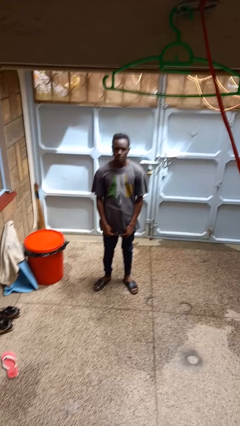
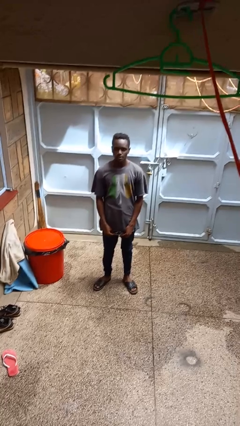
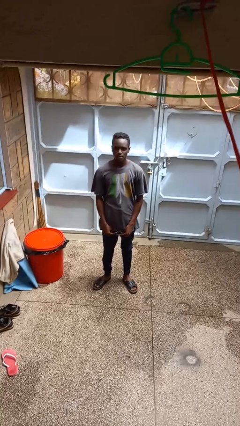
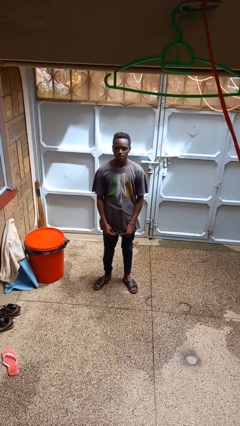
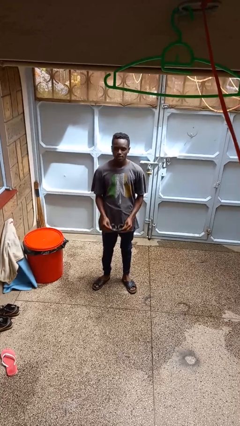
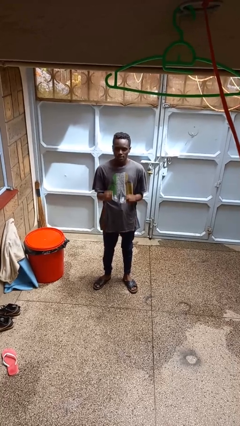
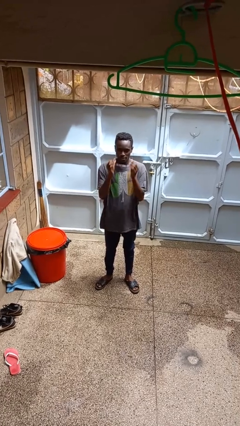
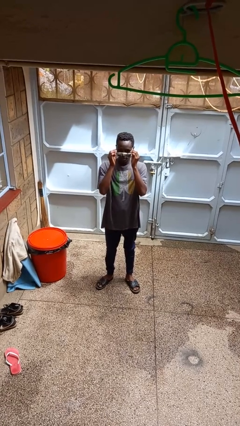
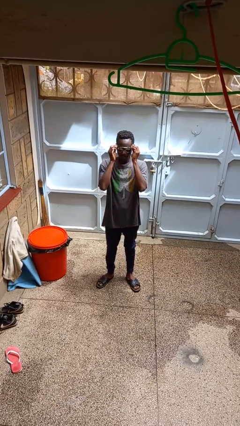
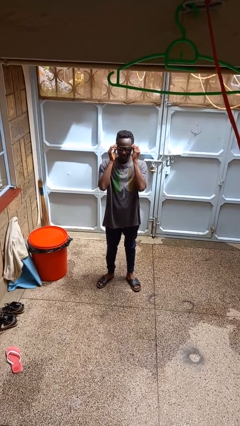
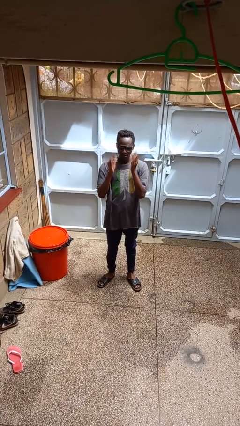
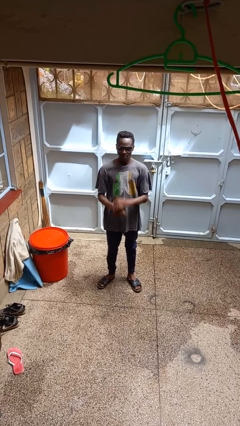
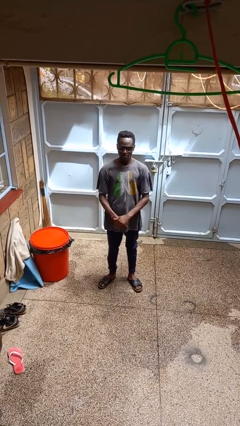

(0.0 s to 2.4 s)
person puts on sunglasses

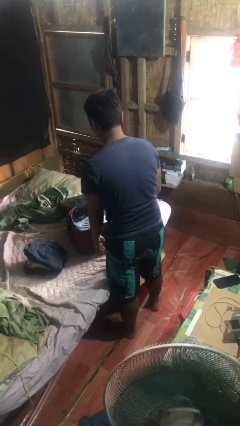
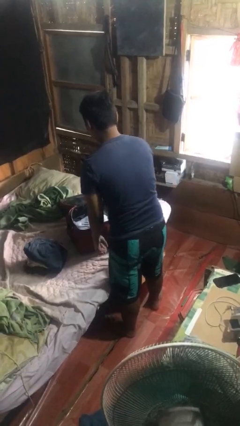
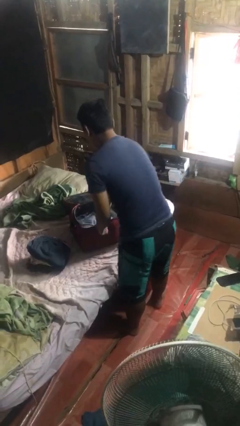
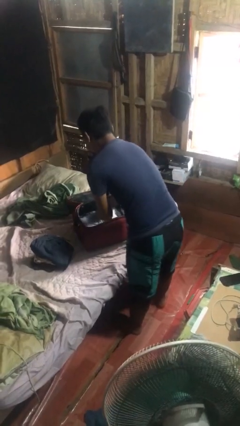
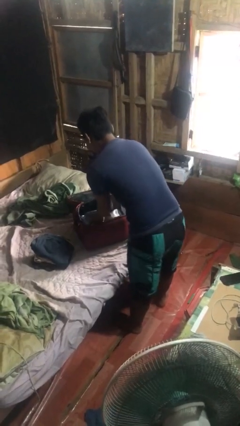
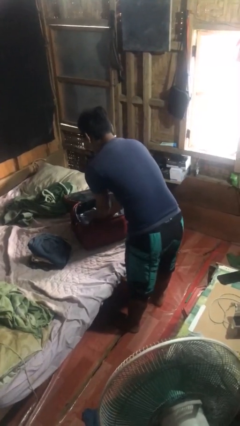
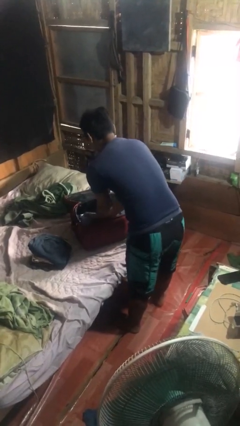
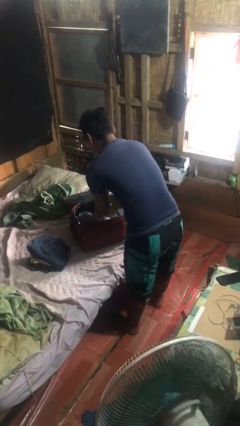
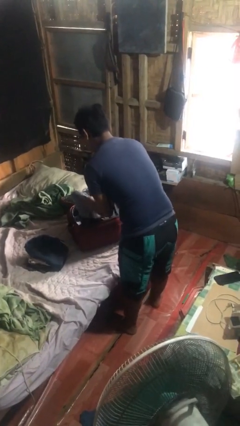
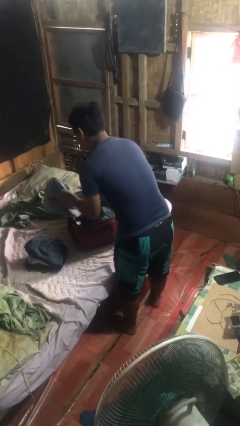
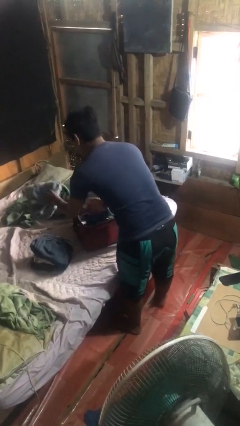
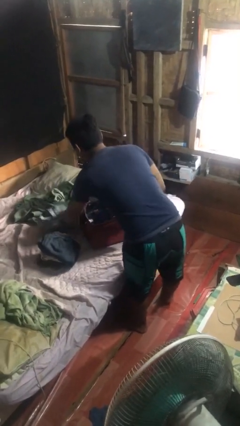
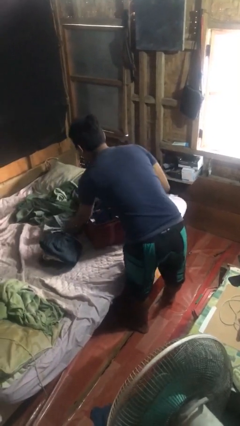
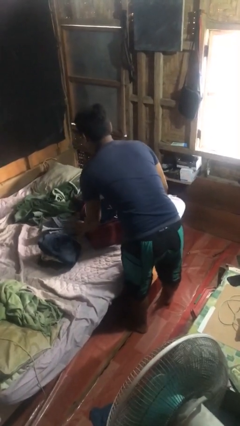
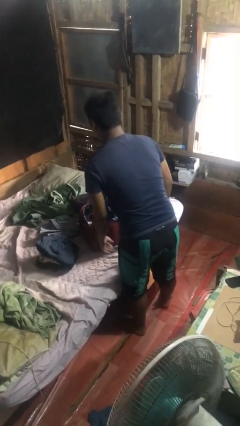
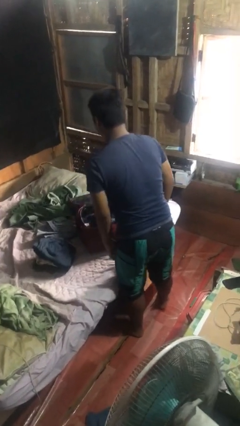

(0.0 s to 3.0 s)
person unloads clothes from suitcase

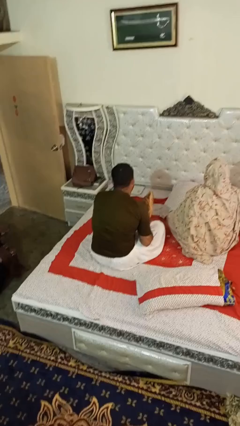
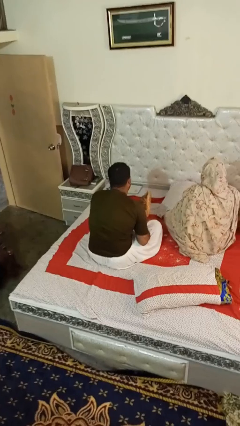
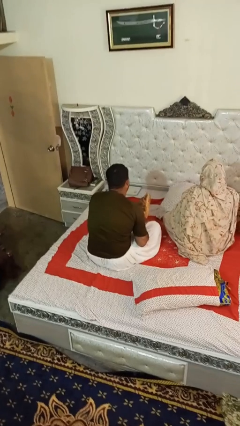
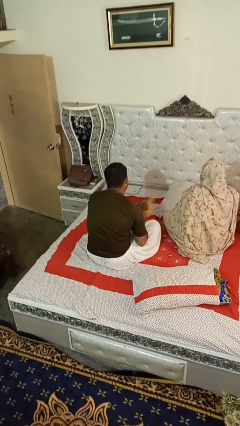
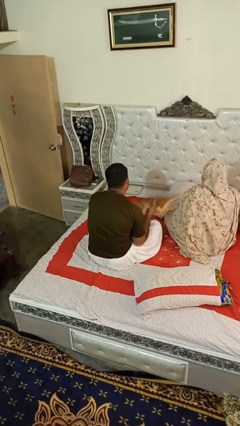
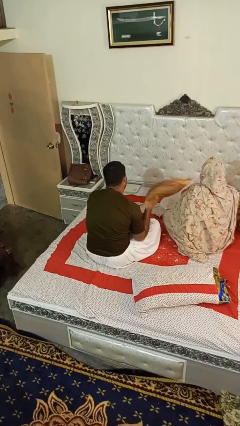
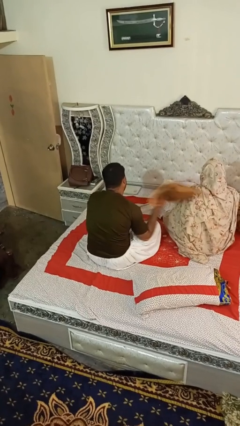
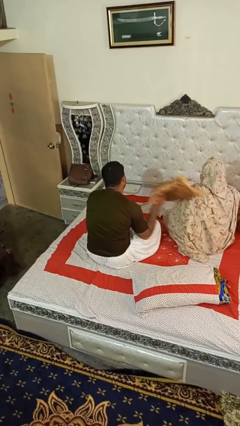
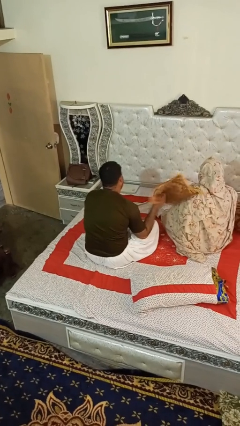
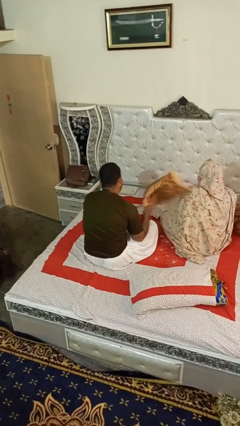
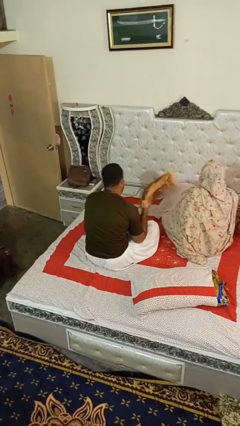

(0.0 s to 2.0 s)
person hits person with pillow

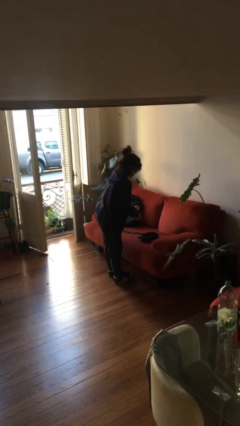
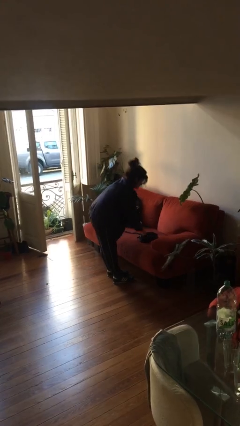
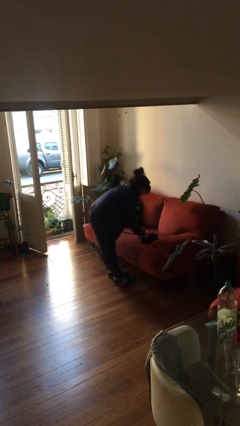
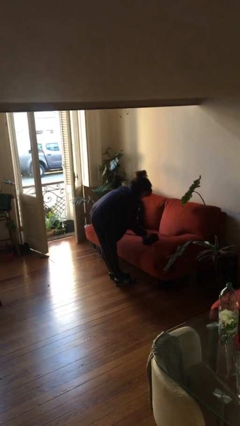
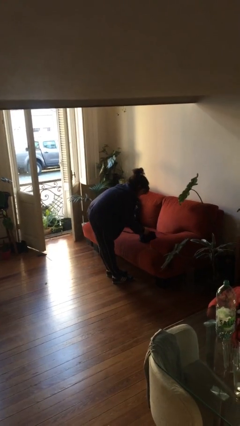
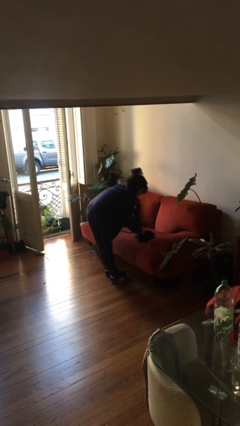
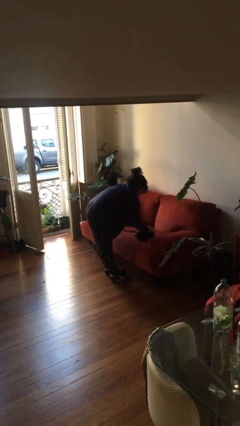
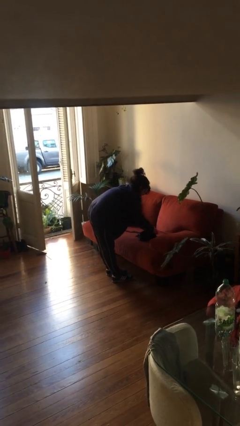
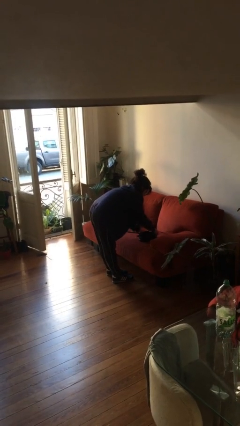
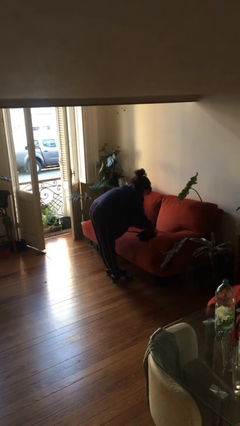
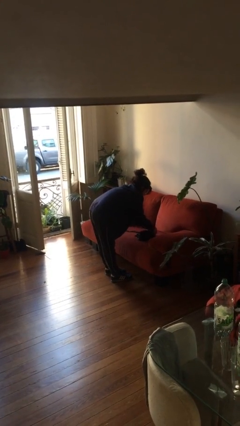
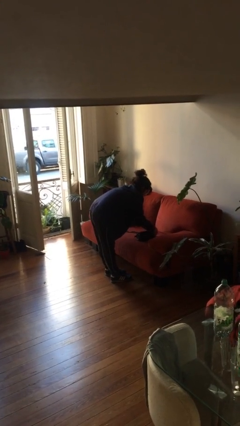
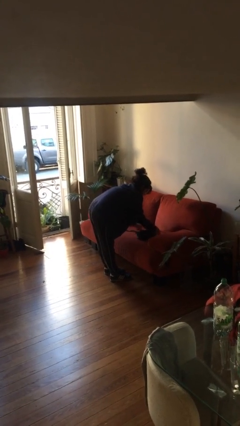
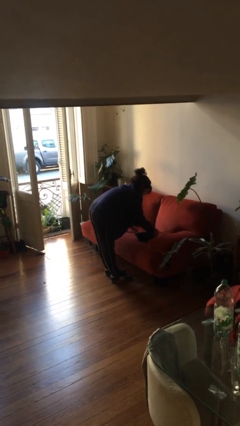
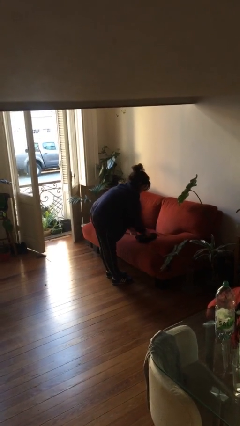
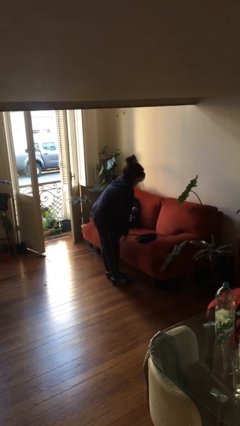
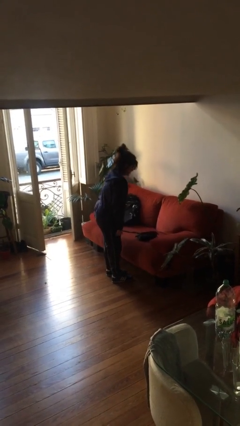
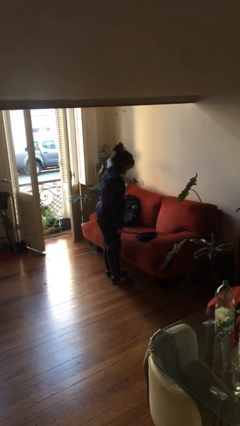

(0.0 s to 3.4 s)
person puts object into purse

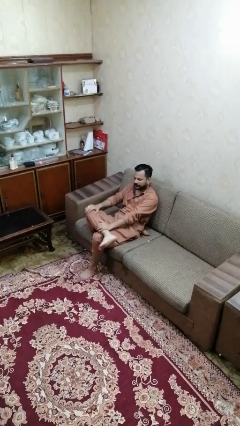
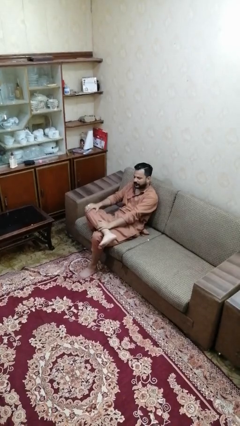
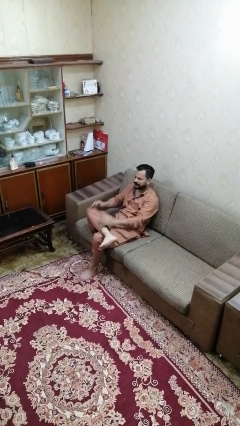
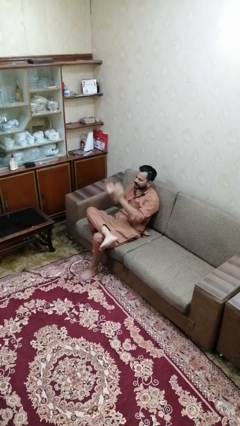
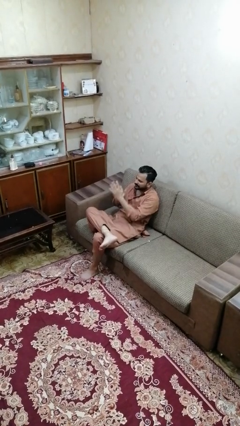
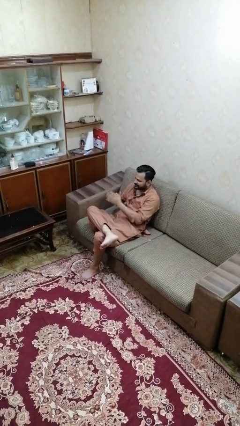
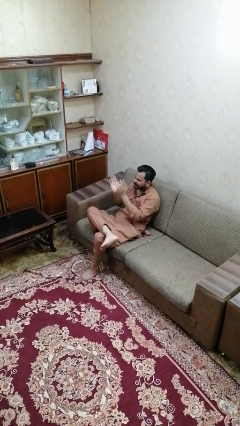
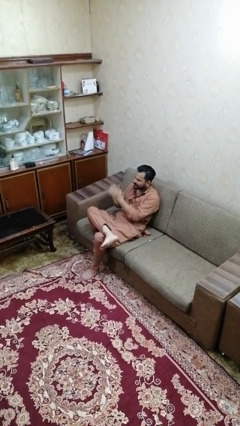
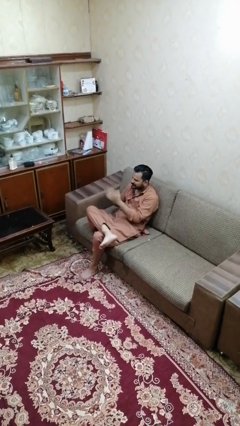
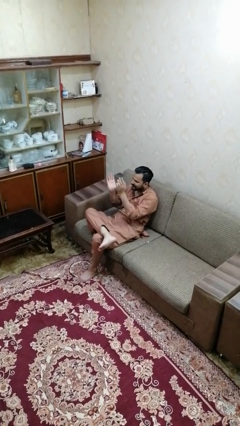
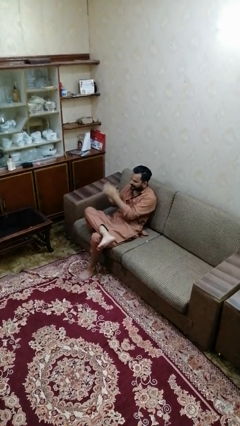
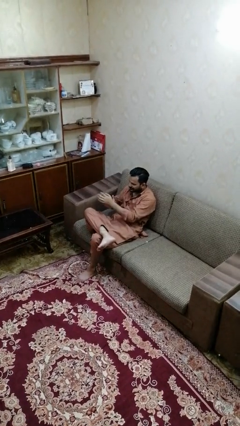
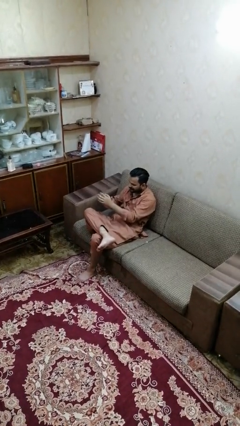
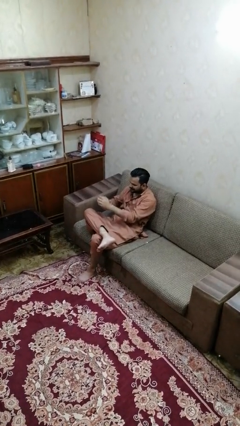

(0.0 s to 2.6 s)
person claps hands

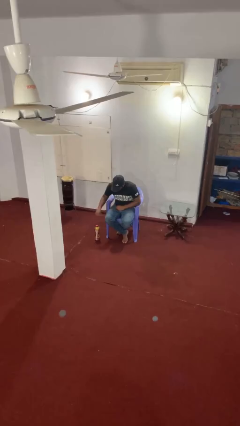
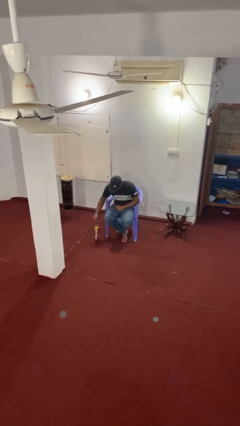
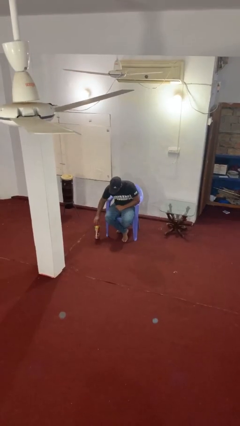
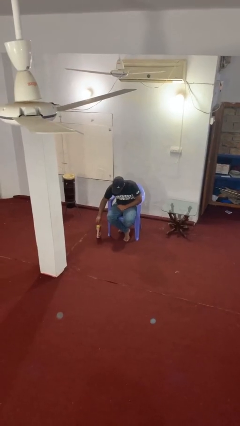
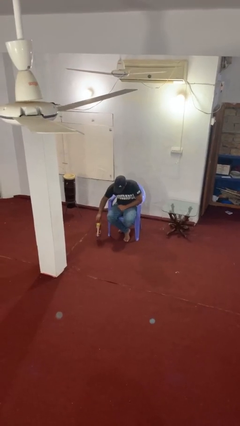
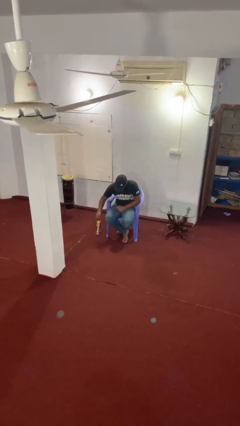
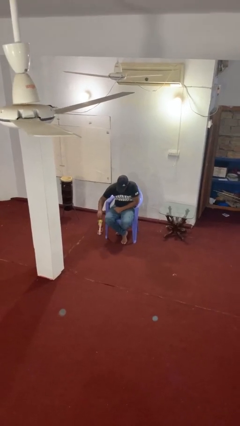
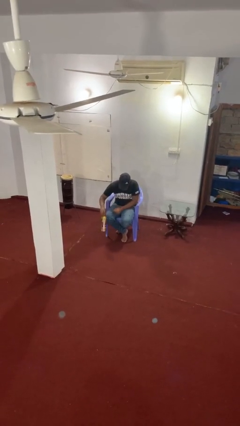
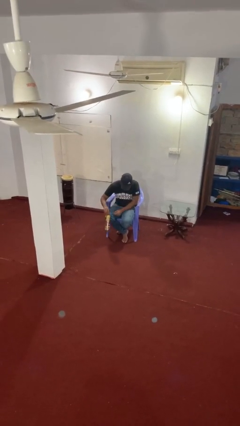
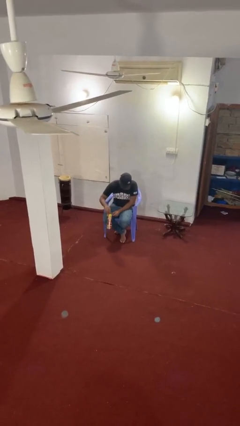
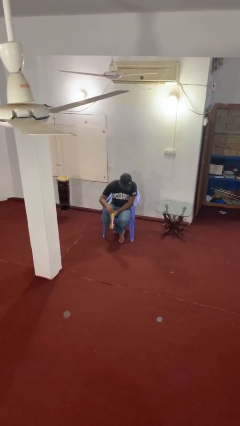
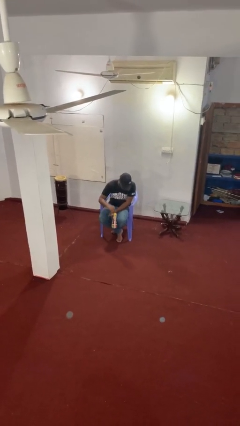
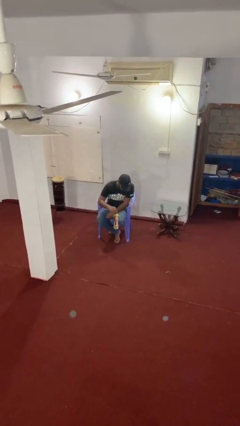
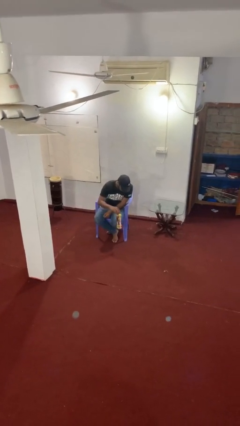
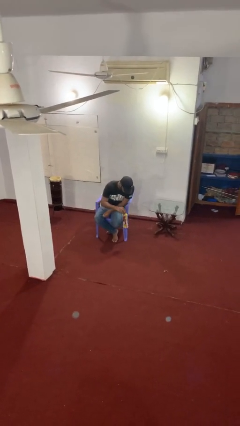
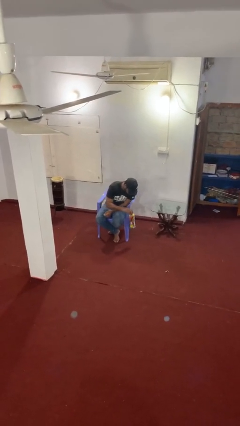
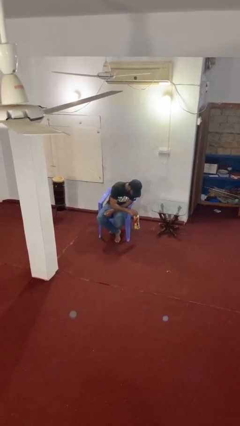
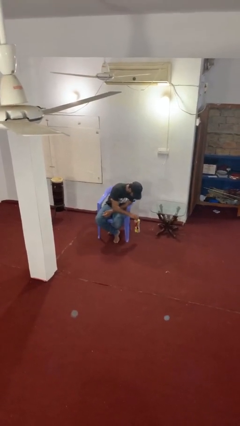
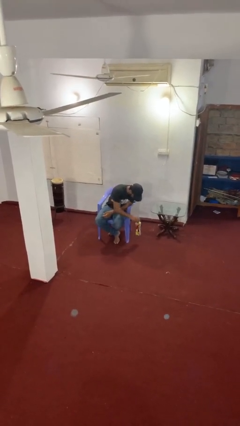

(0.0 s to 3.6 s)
person picks up object from floor

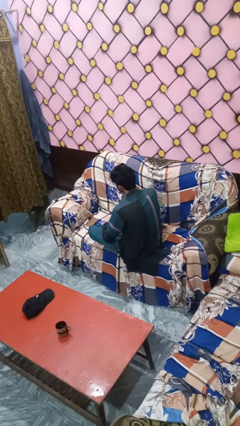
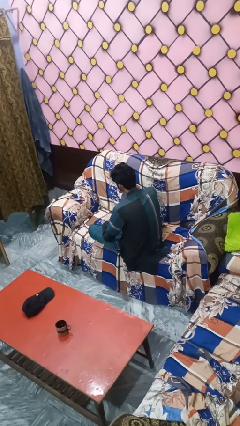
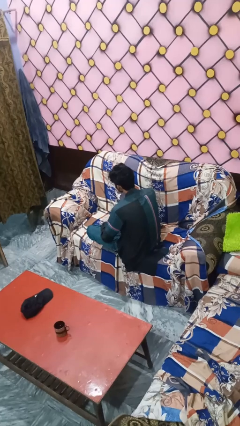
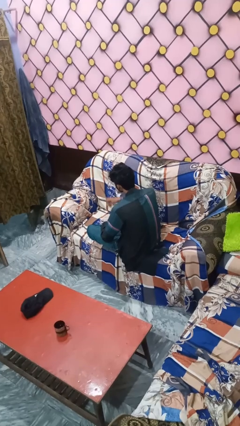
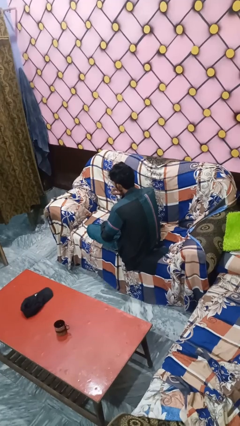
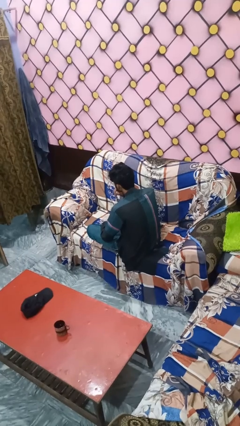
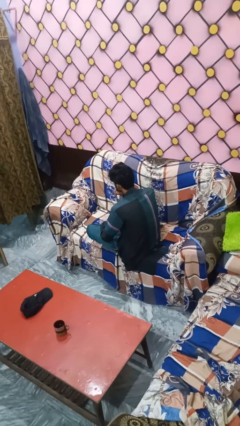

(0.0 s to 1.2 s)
person gestures be quiet
